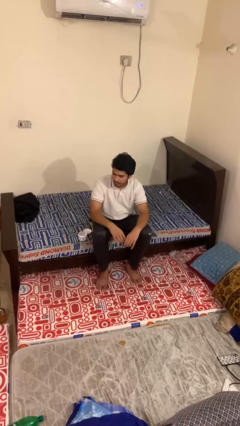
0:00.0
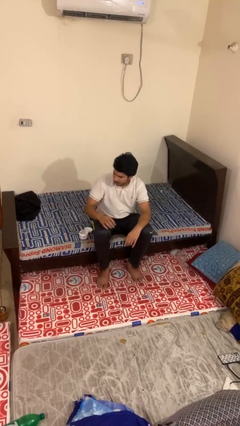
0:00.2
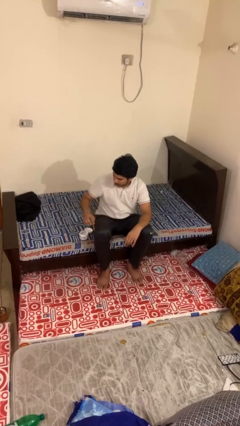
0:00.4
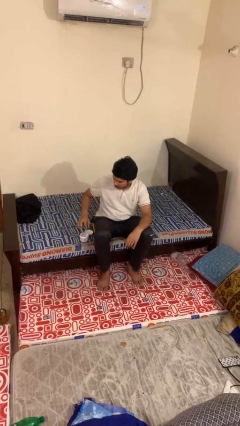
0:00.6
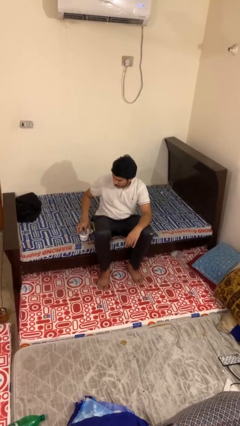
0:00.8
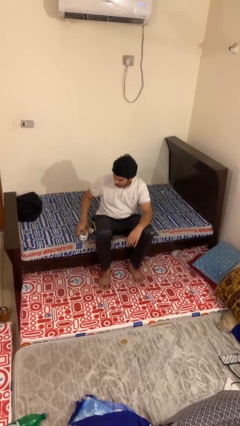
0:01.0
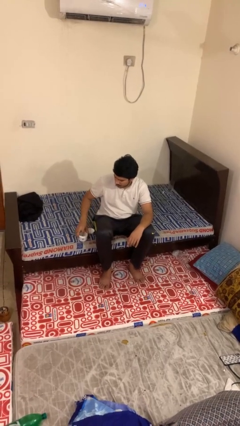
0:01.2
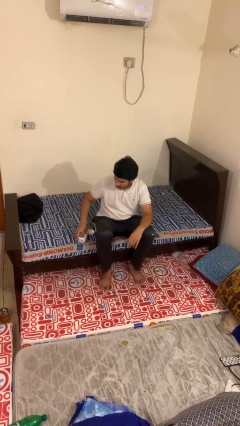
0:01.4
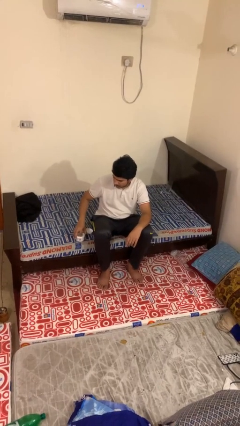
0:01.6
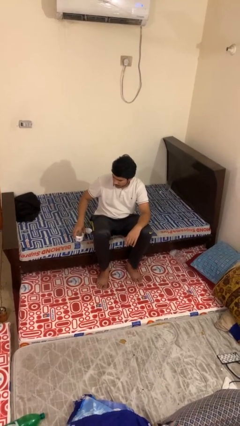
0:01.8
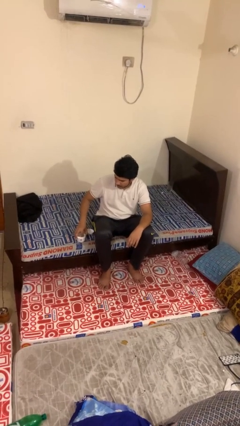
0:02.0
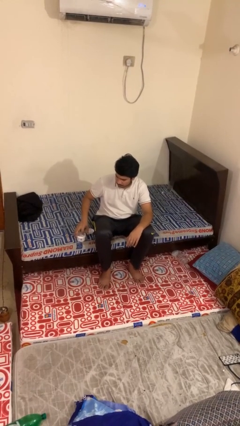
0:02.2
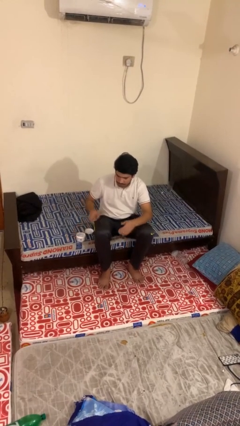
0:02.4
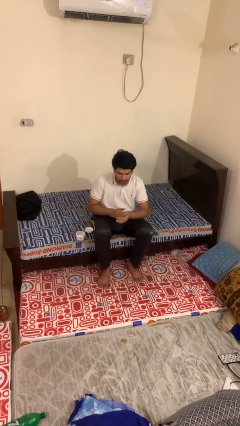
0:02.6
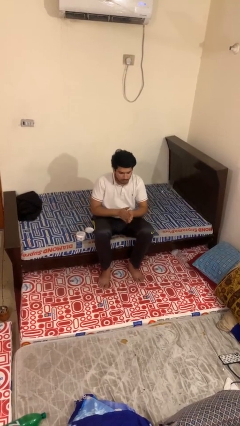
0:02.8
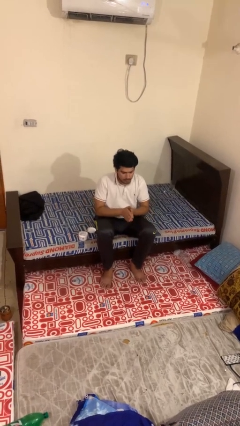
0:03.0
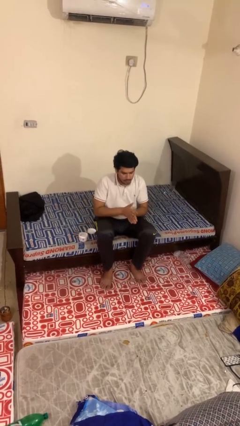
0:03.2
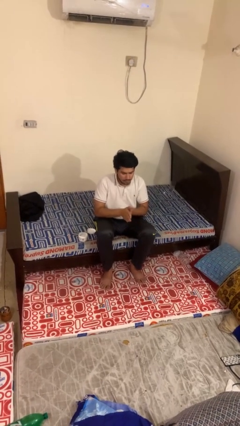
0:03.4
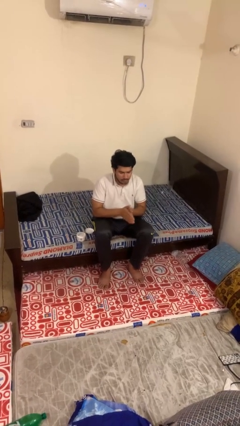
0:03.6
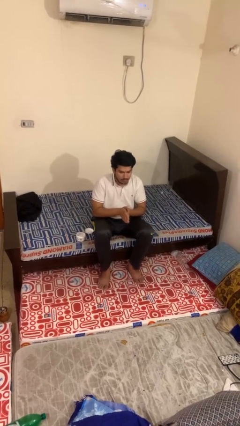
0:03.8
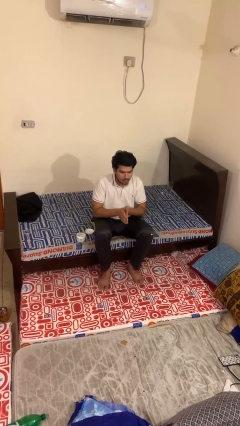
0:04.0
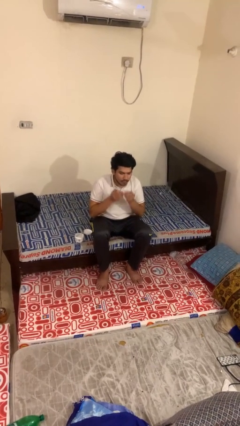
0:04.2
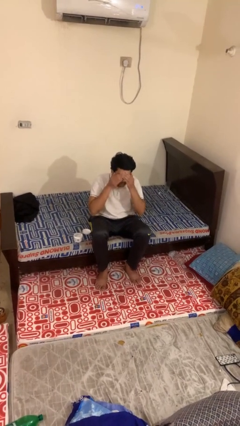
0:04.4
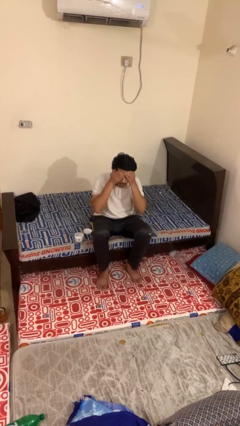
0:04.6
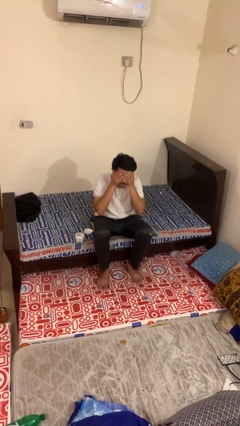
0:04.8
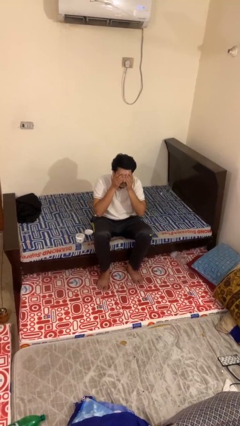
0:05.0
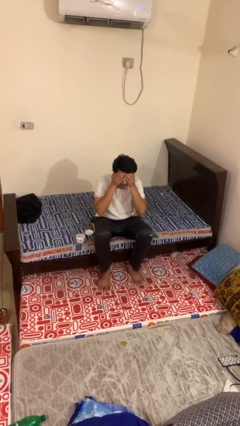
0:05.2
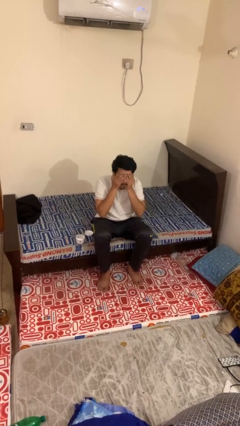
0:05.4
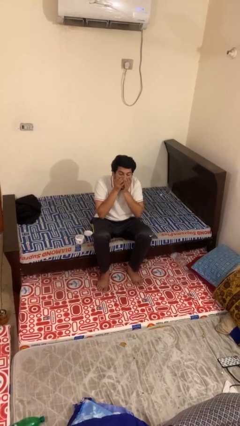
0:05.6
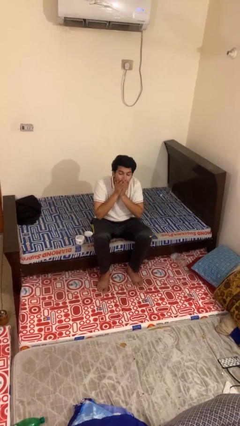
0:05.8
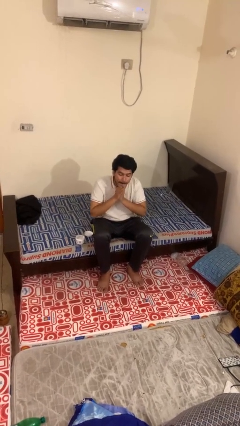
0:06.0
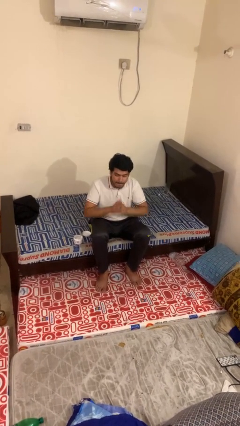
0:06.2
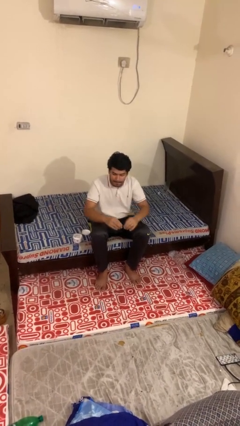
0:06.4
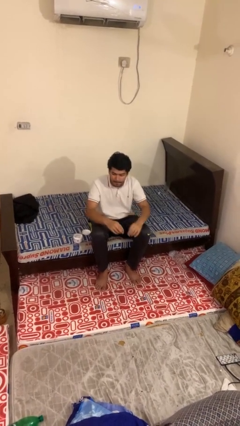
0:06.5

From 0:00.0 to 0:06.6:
person applies facial moisturizer

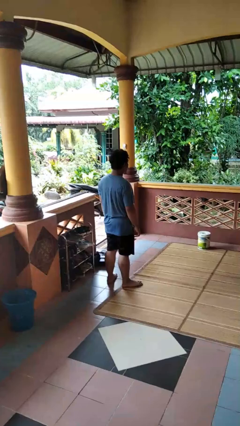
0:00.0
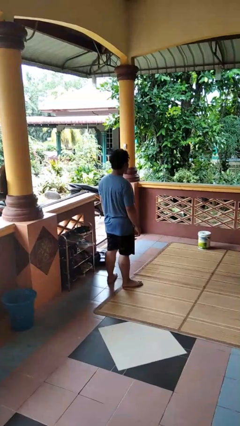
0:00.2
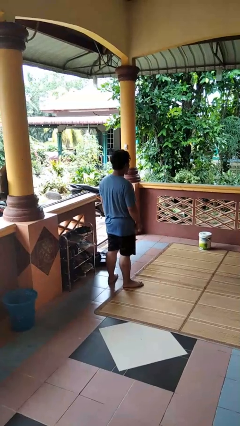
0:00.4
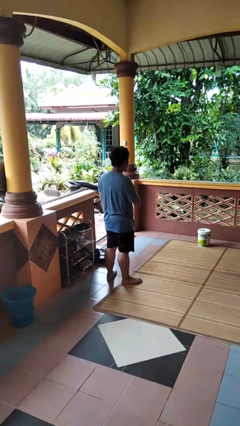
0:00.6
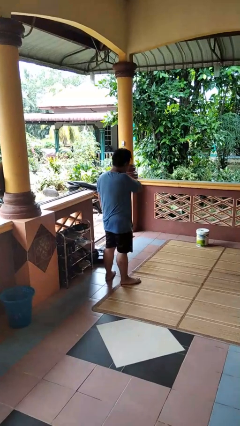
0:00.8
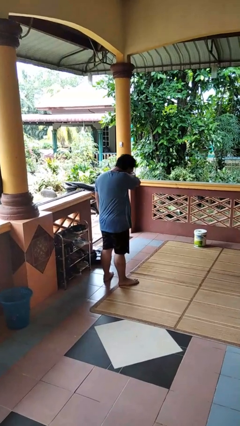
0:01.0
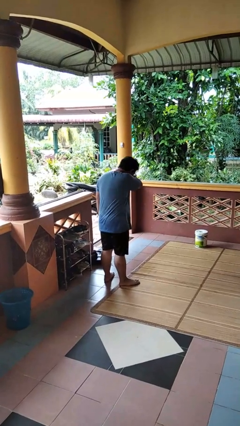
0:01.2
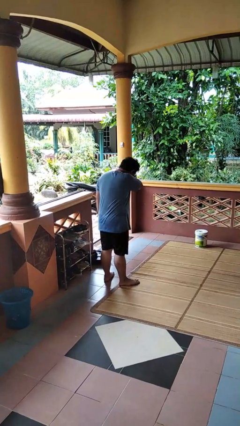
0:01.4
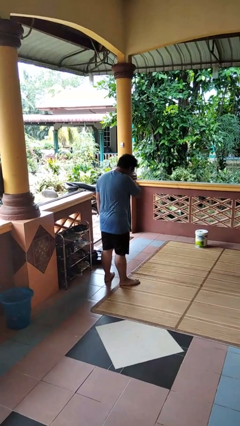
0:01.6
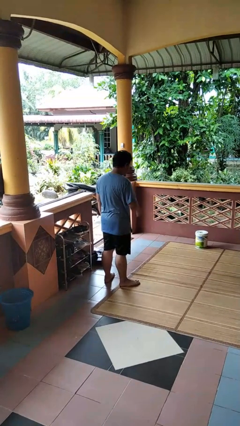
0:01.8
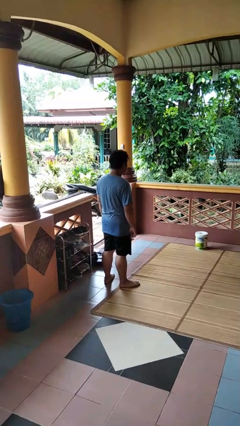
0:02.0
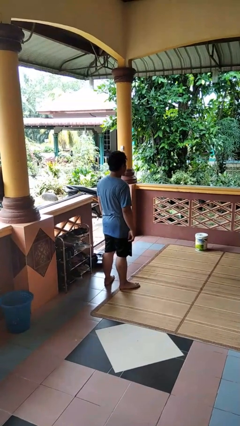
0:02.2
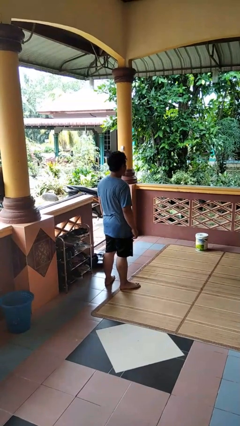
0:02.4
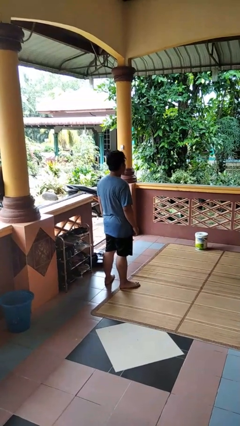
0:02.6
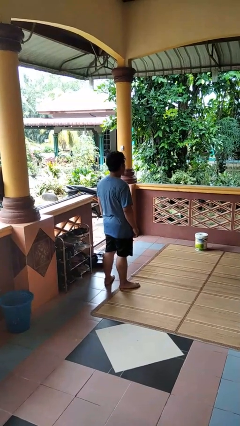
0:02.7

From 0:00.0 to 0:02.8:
person sneezes into hand

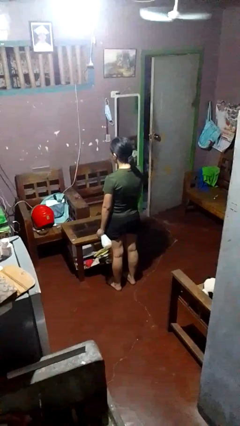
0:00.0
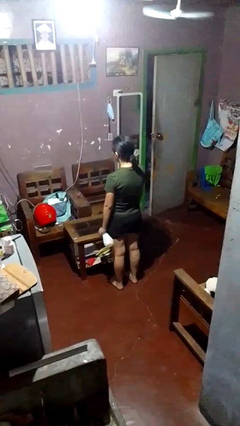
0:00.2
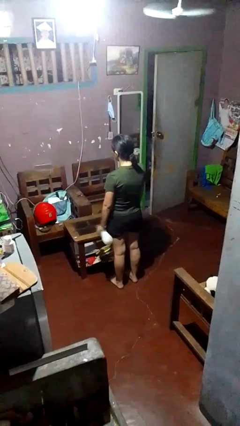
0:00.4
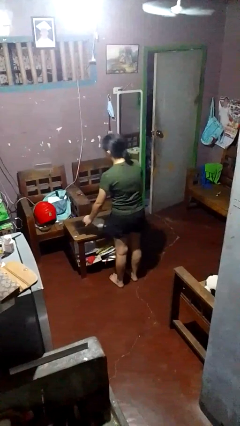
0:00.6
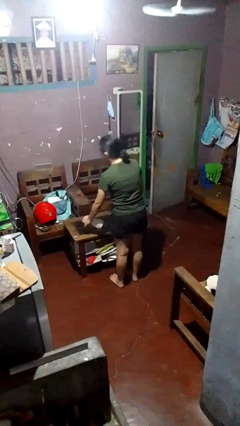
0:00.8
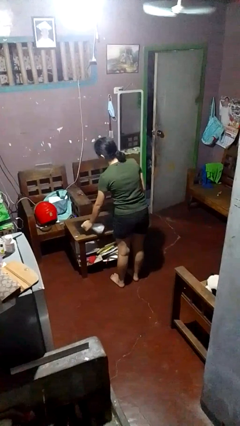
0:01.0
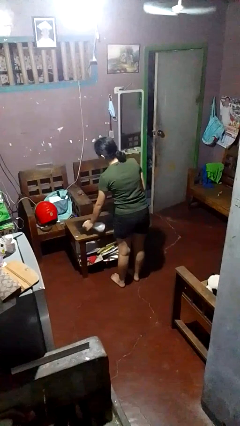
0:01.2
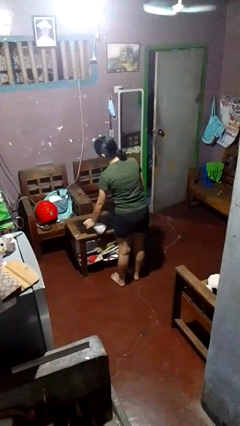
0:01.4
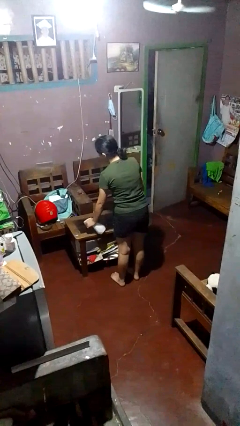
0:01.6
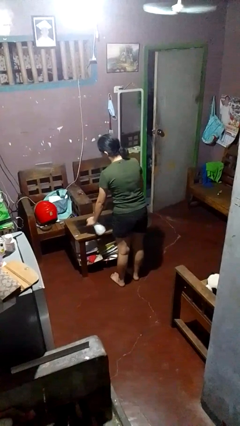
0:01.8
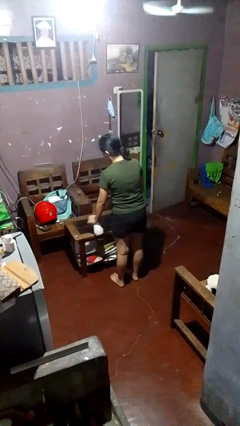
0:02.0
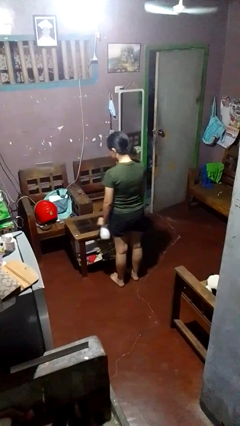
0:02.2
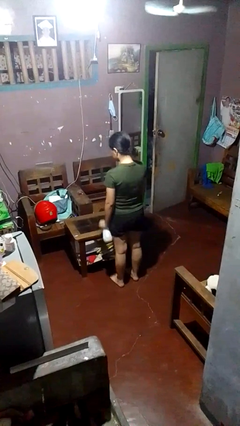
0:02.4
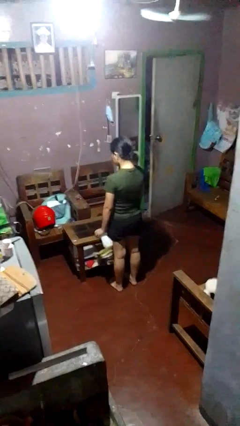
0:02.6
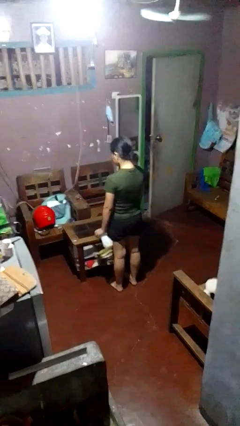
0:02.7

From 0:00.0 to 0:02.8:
person sprays from bottle

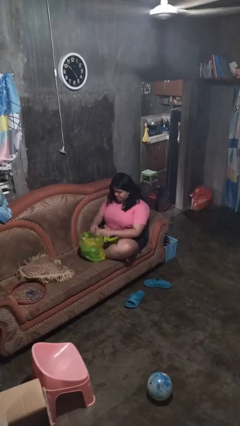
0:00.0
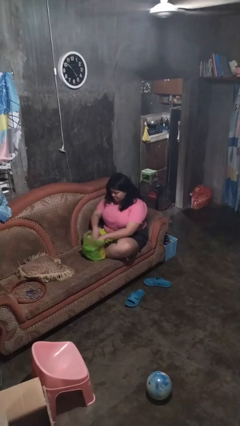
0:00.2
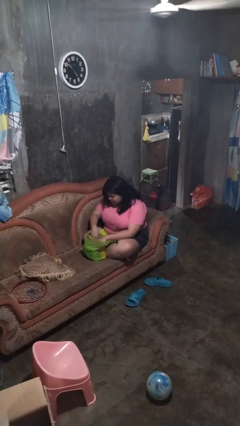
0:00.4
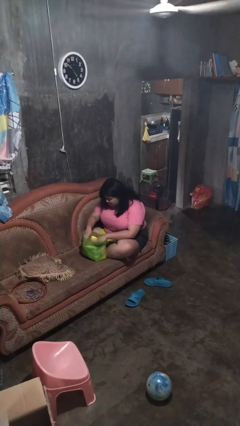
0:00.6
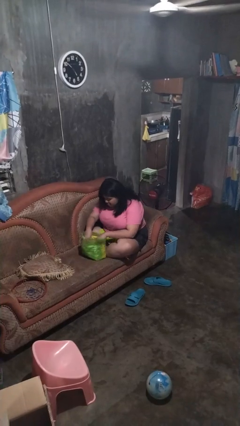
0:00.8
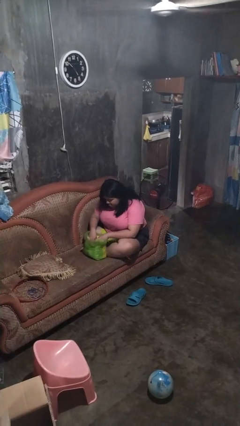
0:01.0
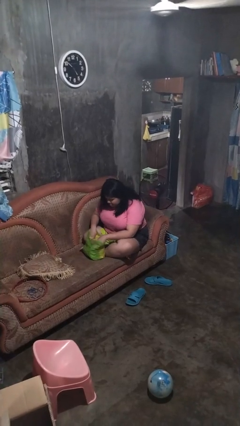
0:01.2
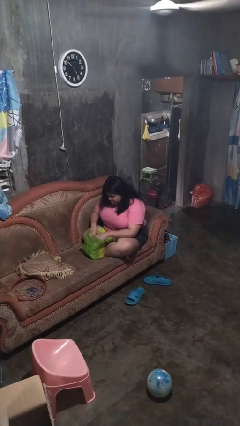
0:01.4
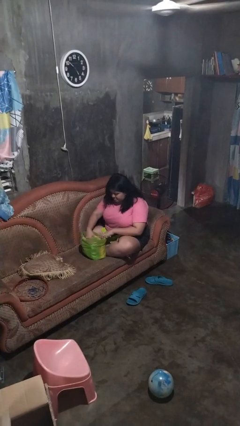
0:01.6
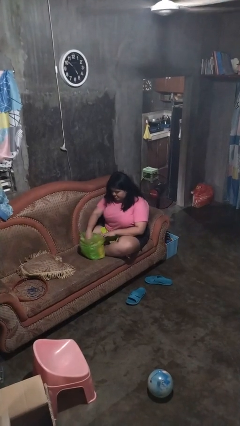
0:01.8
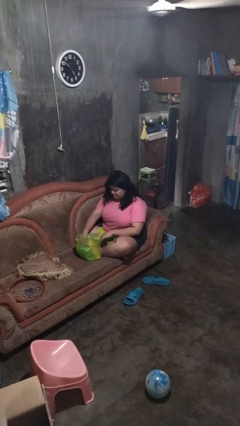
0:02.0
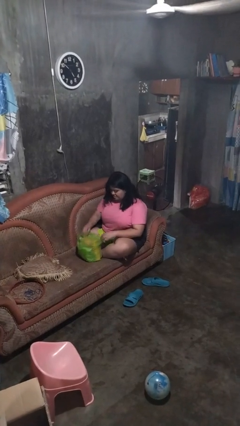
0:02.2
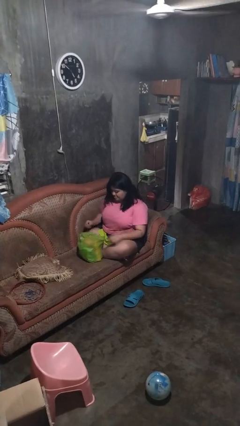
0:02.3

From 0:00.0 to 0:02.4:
person searches in bag

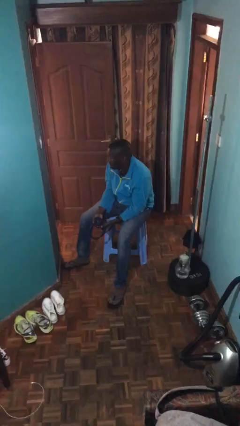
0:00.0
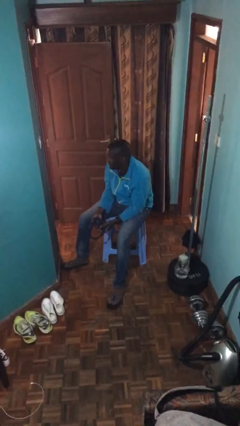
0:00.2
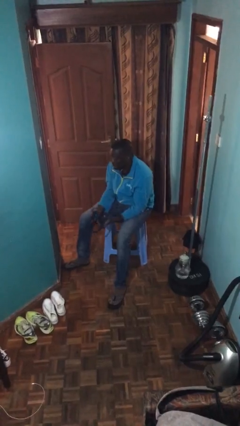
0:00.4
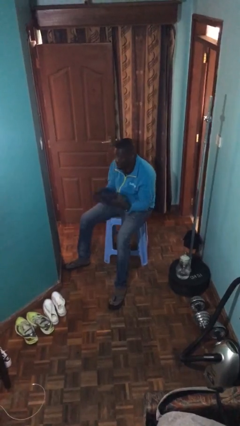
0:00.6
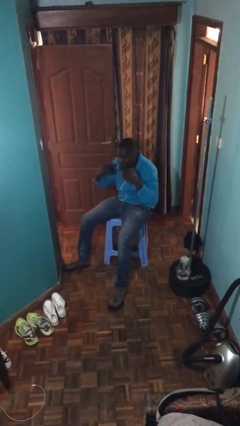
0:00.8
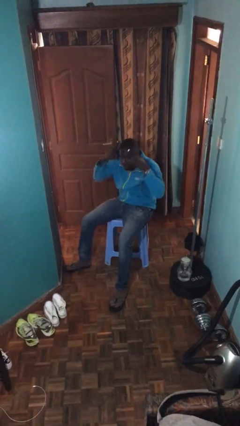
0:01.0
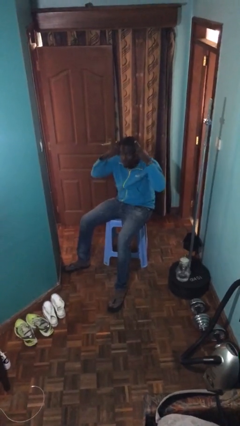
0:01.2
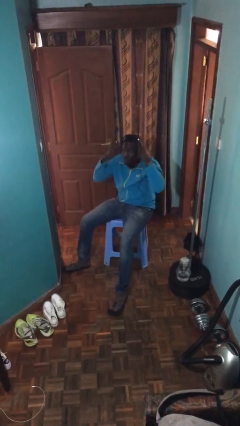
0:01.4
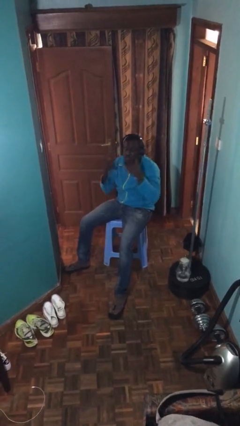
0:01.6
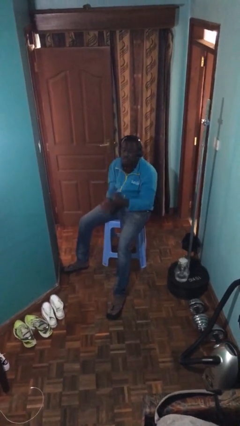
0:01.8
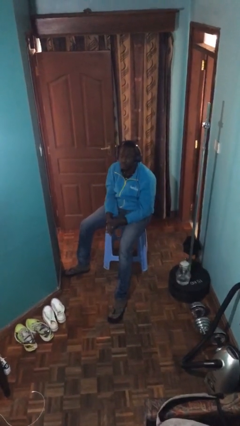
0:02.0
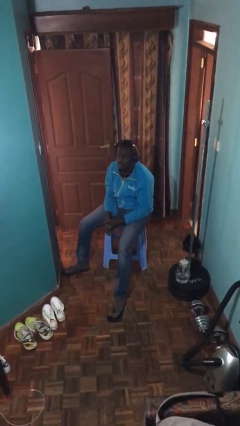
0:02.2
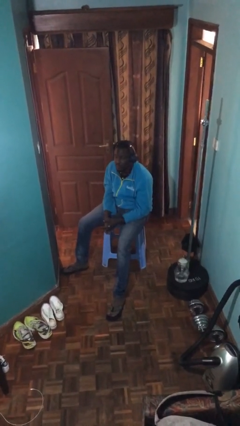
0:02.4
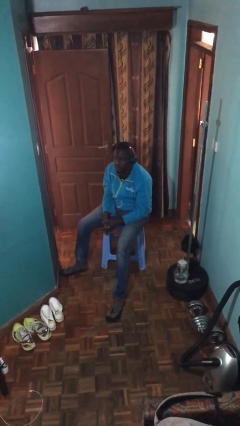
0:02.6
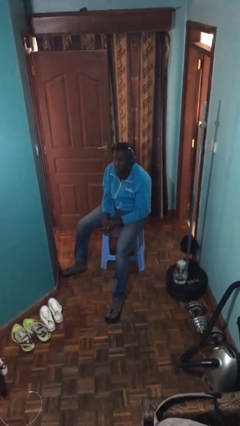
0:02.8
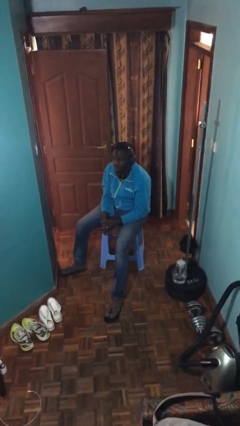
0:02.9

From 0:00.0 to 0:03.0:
person puts on headphones
